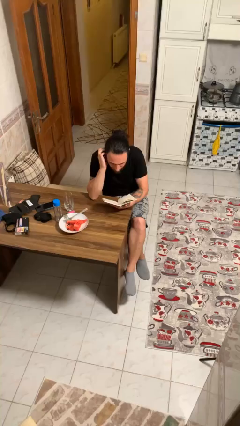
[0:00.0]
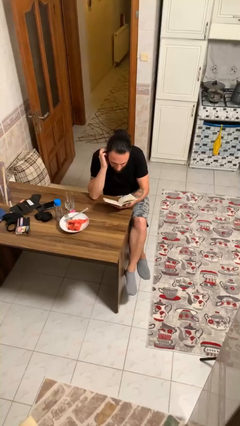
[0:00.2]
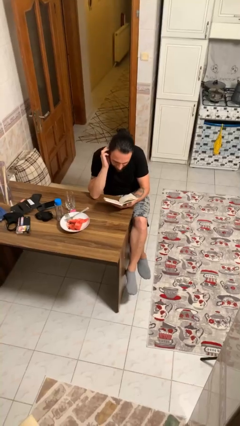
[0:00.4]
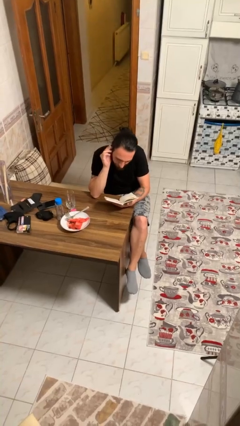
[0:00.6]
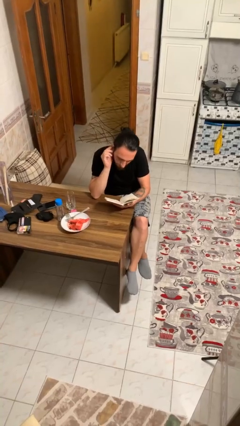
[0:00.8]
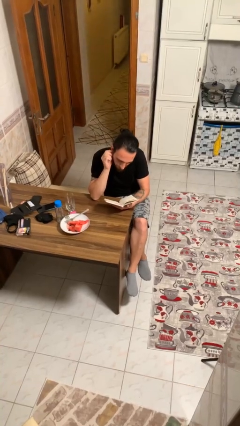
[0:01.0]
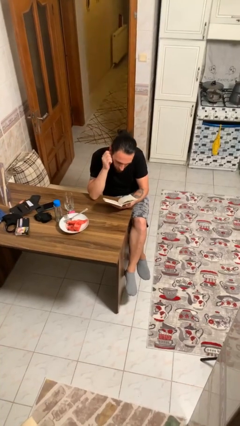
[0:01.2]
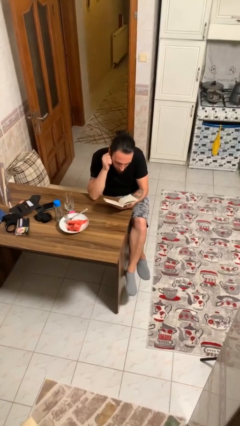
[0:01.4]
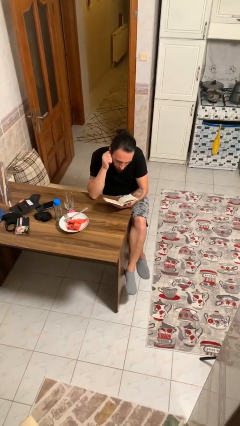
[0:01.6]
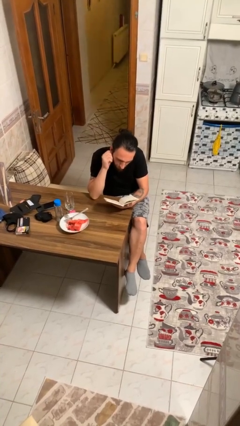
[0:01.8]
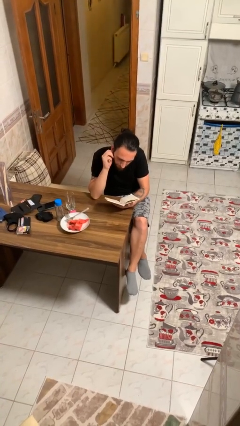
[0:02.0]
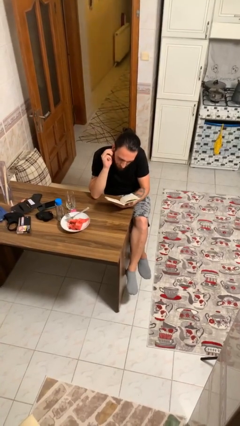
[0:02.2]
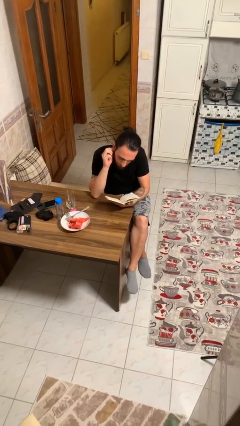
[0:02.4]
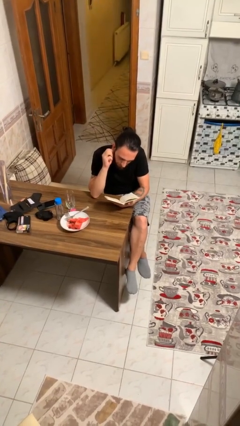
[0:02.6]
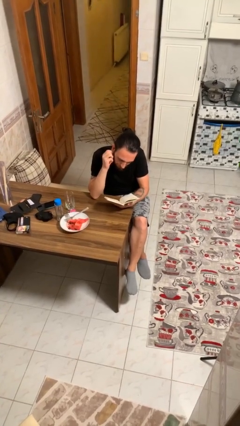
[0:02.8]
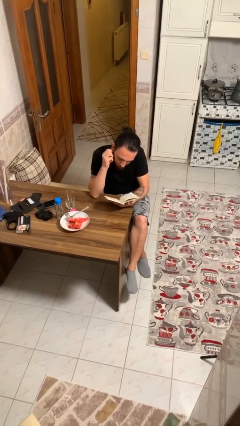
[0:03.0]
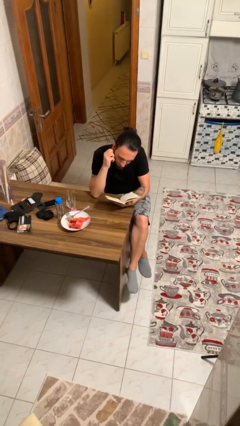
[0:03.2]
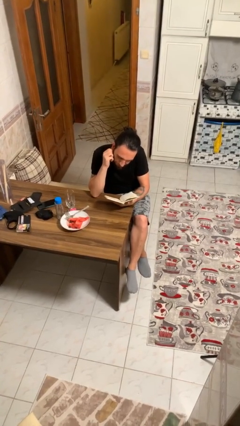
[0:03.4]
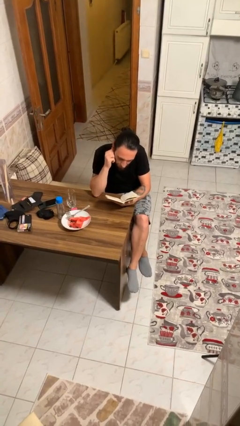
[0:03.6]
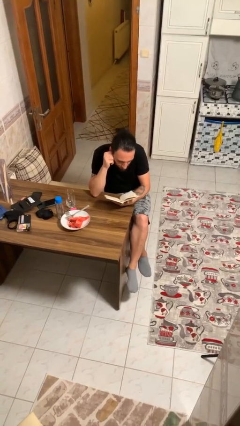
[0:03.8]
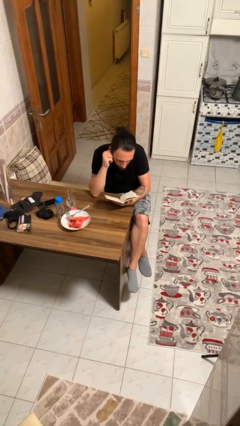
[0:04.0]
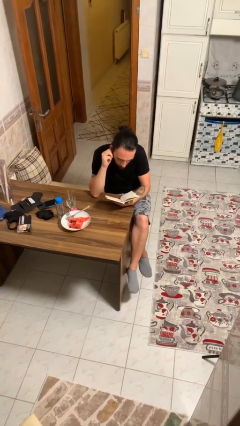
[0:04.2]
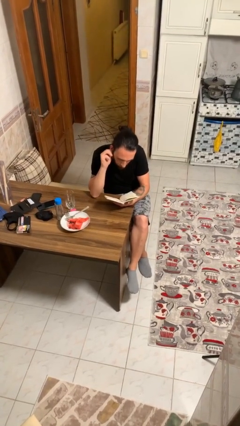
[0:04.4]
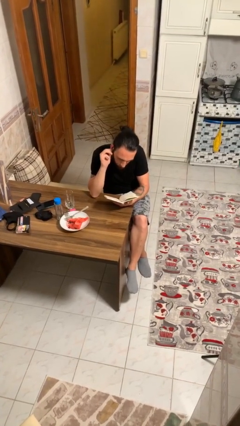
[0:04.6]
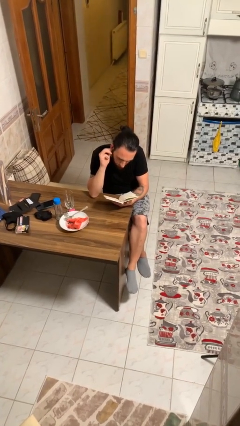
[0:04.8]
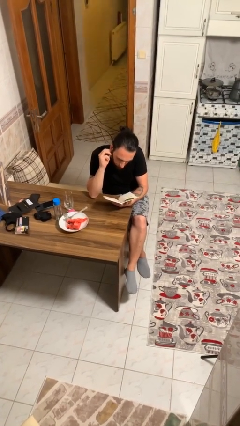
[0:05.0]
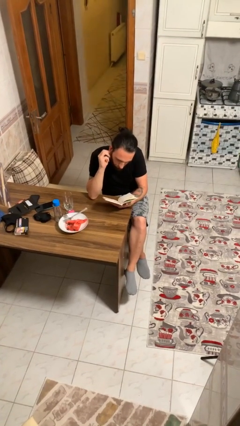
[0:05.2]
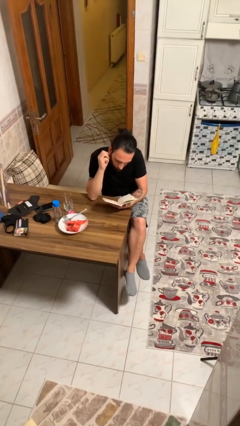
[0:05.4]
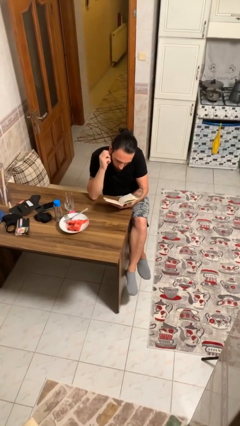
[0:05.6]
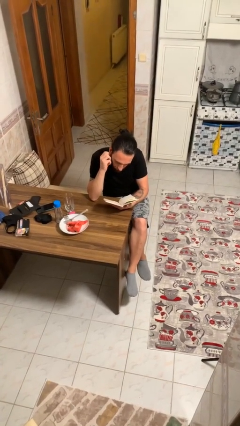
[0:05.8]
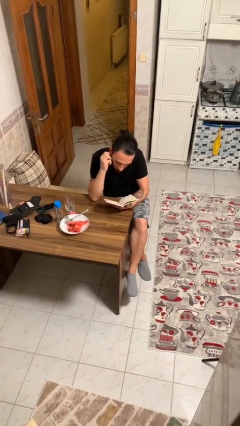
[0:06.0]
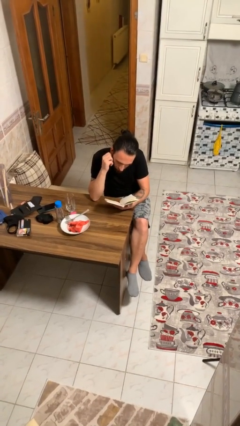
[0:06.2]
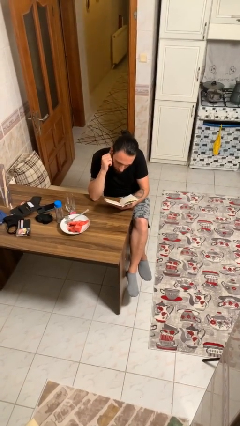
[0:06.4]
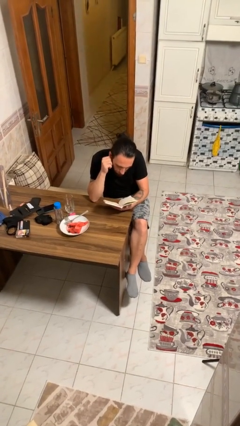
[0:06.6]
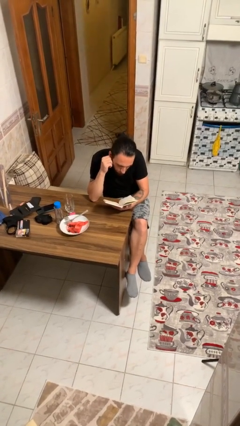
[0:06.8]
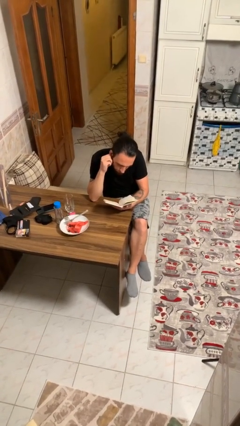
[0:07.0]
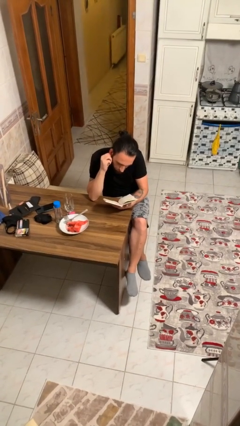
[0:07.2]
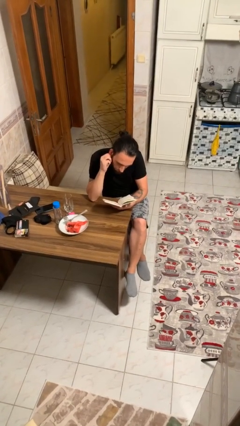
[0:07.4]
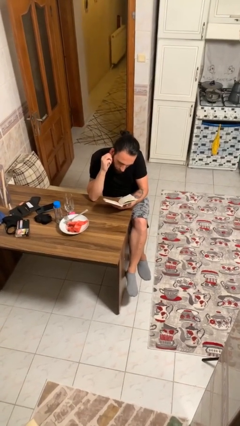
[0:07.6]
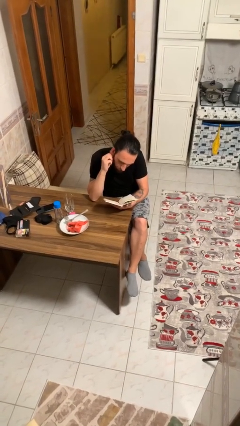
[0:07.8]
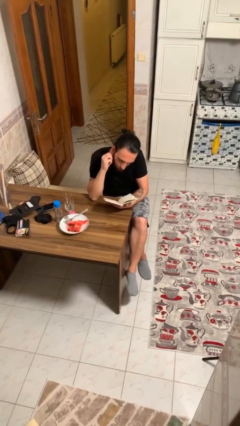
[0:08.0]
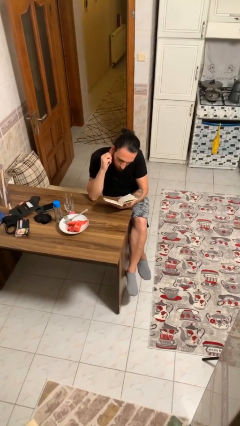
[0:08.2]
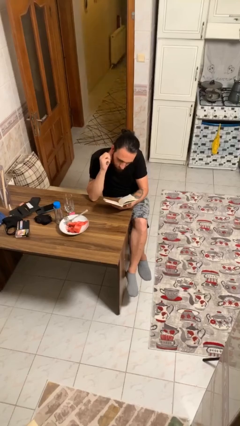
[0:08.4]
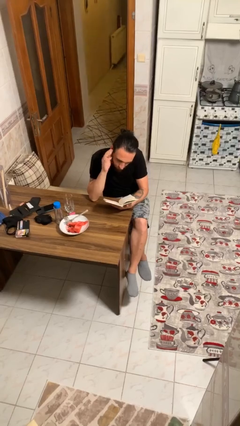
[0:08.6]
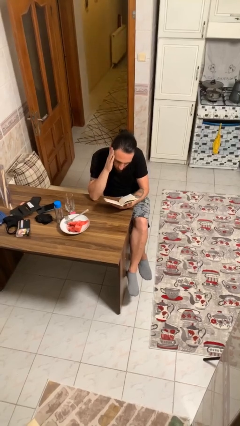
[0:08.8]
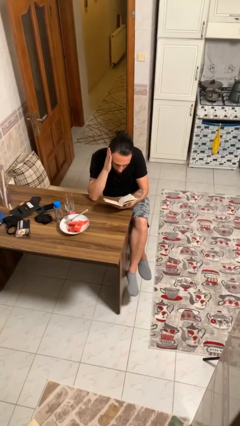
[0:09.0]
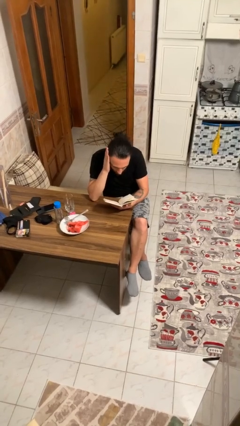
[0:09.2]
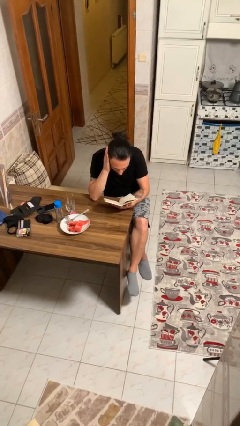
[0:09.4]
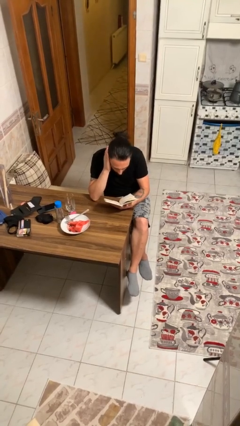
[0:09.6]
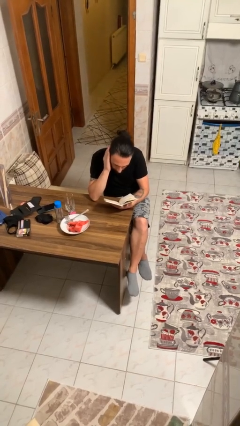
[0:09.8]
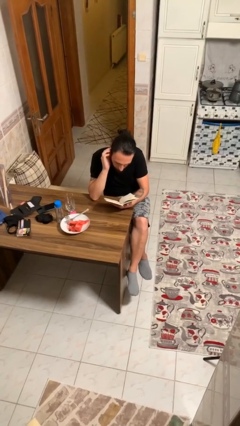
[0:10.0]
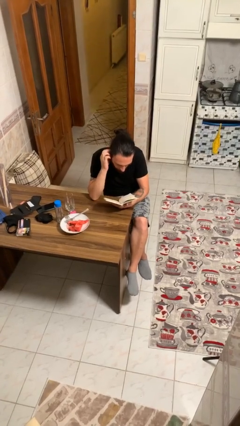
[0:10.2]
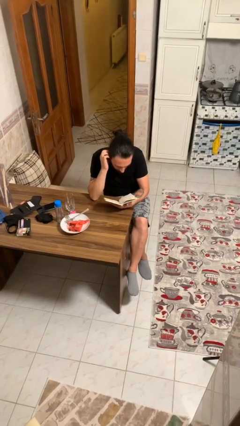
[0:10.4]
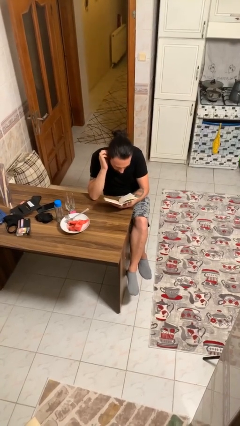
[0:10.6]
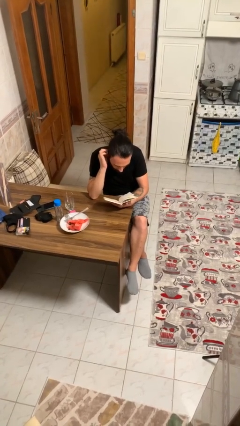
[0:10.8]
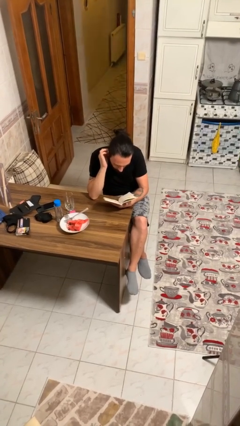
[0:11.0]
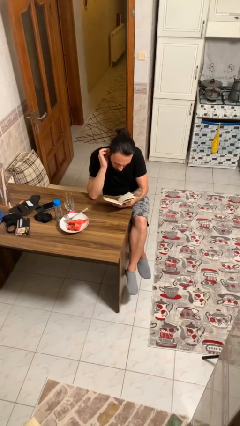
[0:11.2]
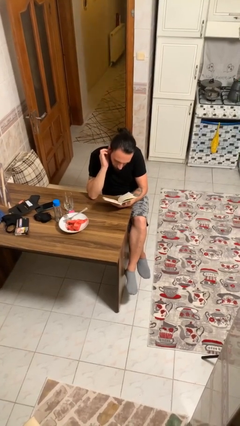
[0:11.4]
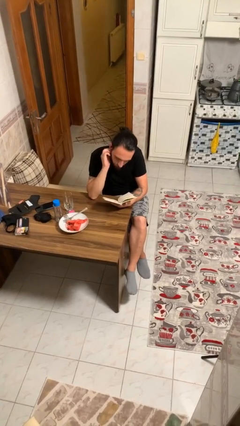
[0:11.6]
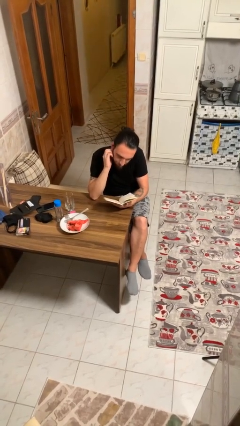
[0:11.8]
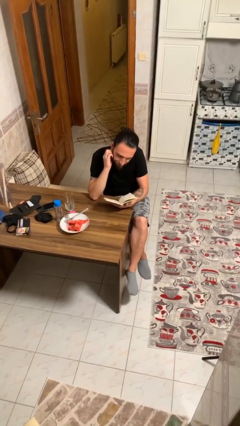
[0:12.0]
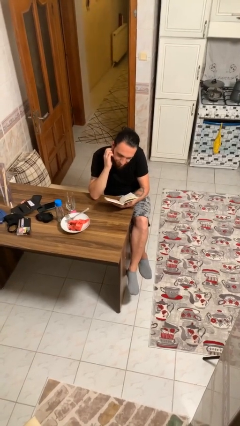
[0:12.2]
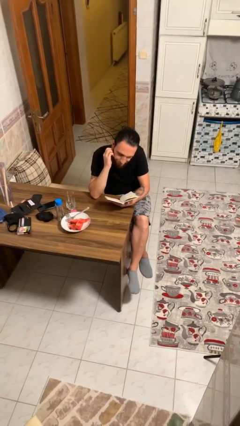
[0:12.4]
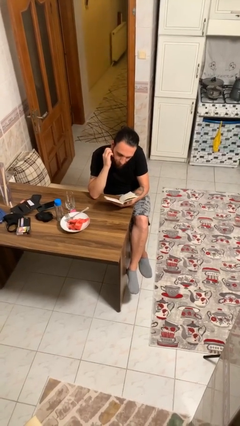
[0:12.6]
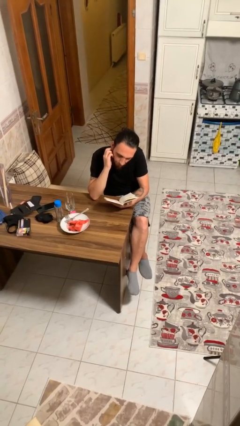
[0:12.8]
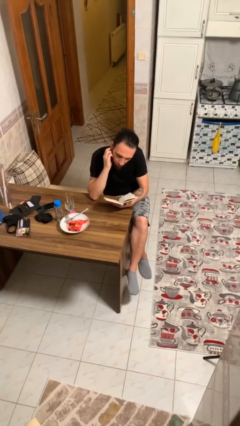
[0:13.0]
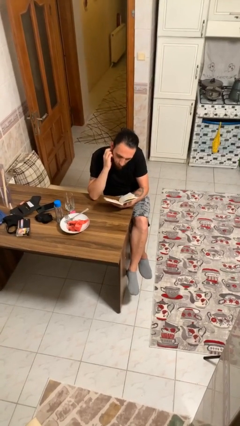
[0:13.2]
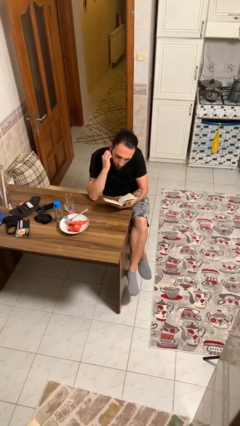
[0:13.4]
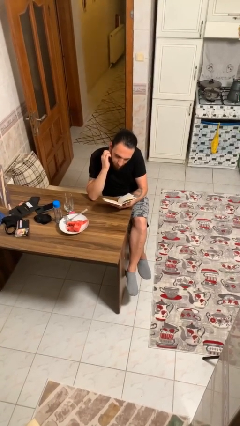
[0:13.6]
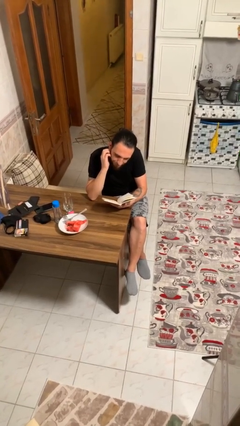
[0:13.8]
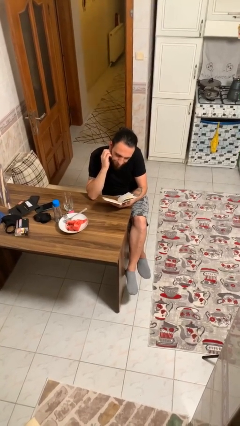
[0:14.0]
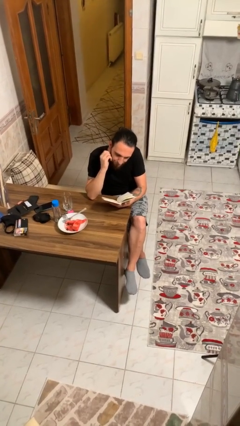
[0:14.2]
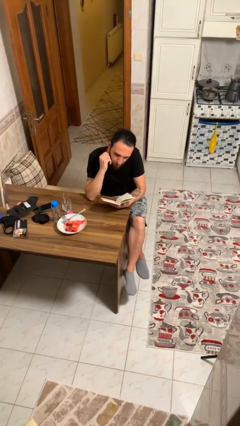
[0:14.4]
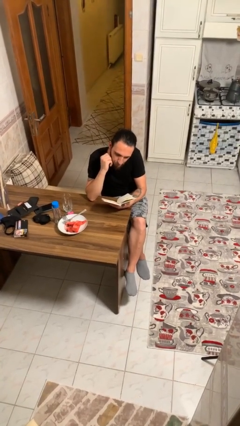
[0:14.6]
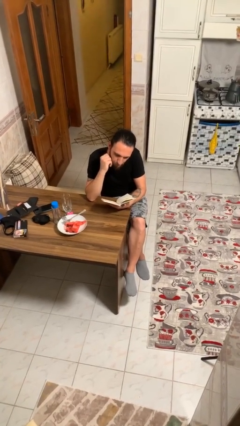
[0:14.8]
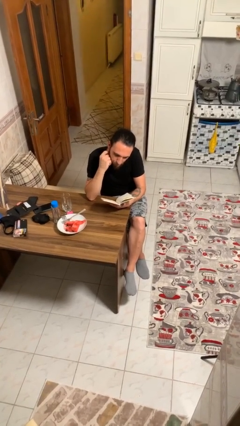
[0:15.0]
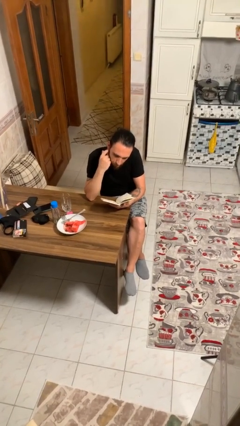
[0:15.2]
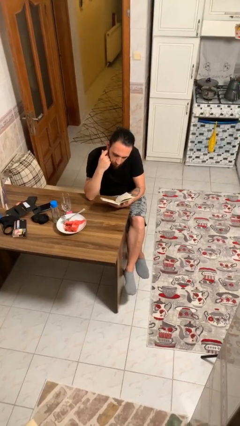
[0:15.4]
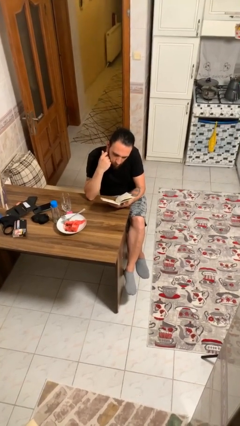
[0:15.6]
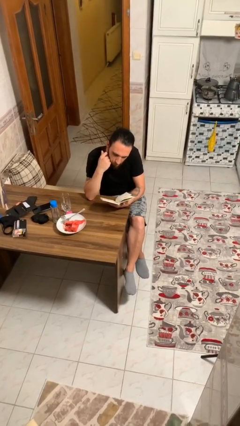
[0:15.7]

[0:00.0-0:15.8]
person reads document

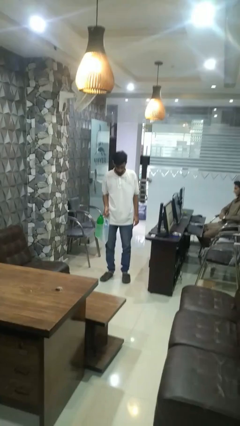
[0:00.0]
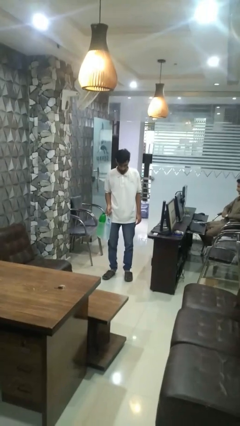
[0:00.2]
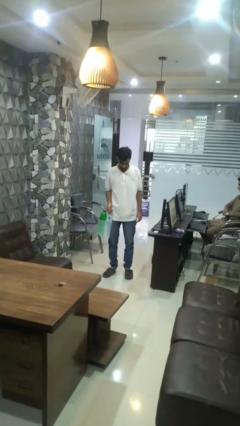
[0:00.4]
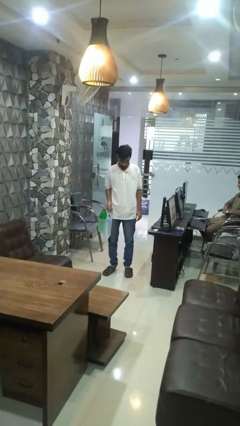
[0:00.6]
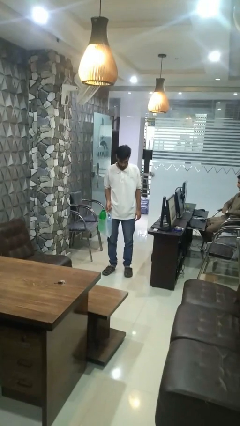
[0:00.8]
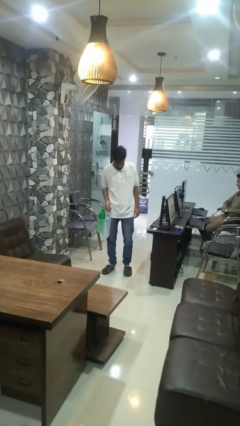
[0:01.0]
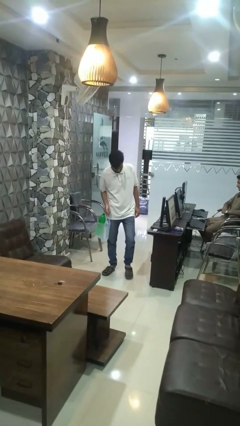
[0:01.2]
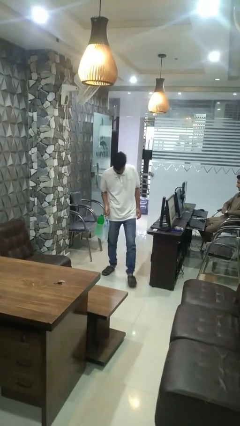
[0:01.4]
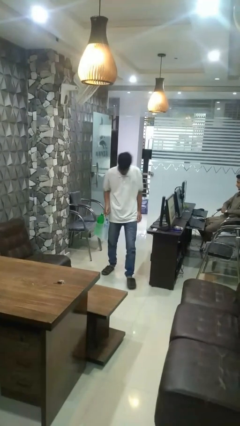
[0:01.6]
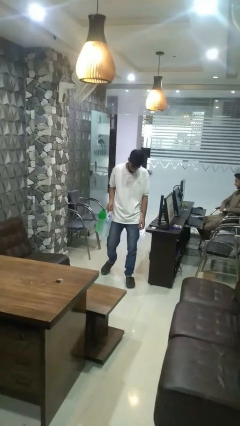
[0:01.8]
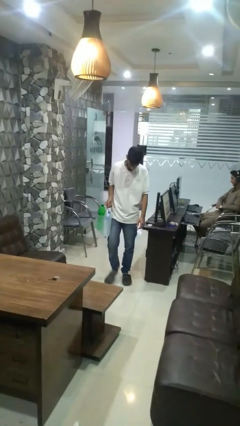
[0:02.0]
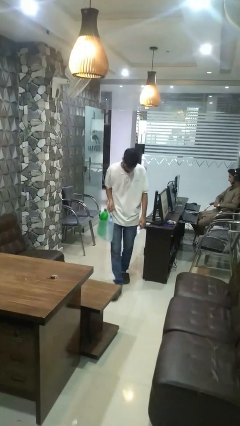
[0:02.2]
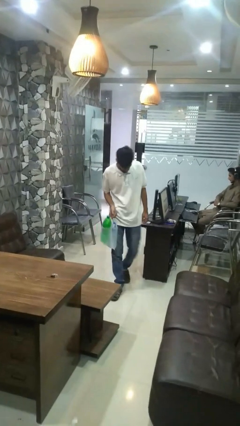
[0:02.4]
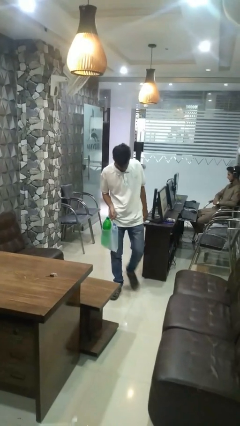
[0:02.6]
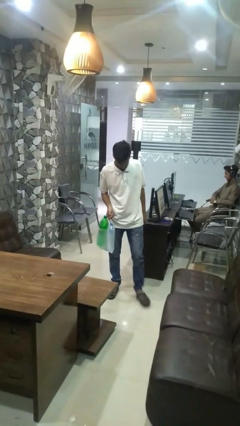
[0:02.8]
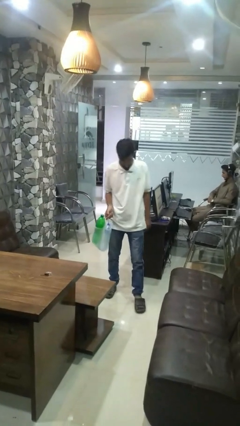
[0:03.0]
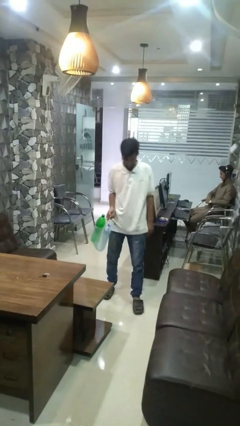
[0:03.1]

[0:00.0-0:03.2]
person carries groceries
